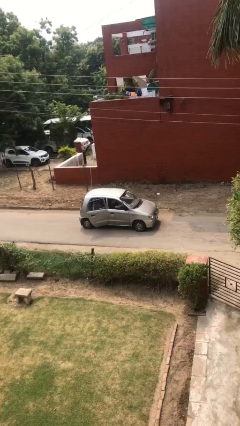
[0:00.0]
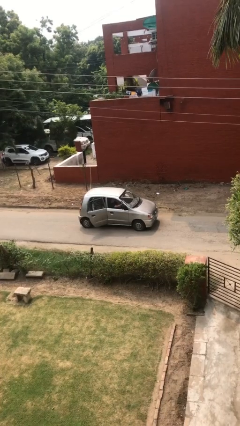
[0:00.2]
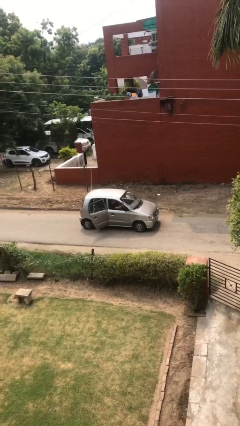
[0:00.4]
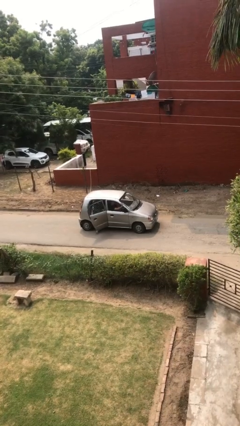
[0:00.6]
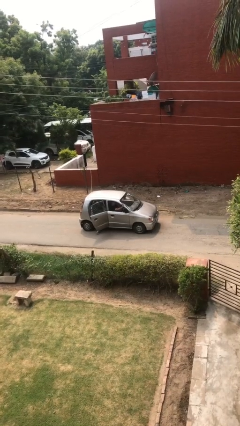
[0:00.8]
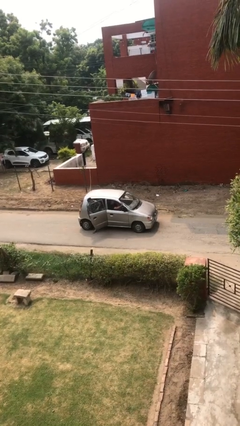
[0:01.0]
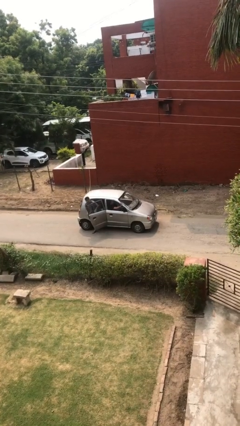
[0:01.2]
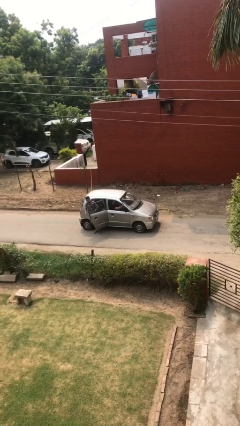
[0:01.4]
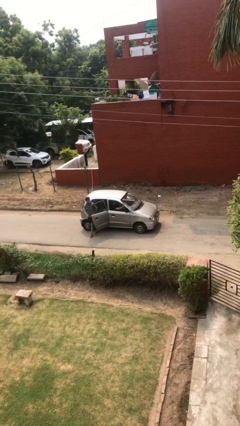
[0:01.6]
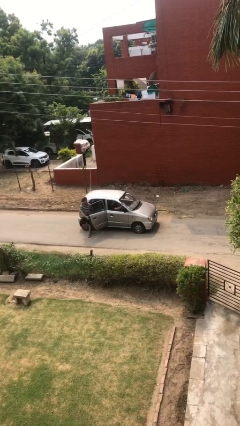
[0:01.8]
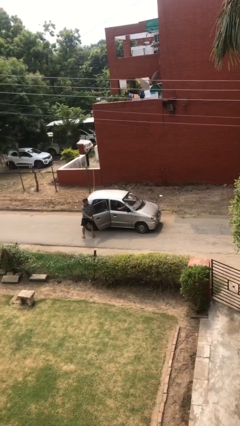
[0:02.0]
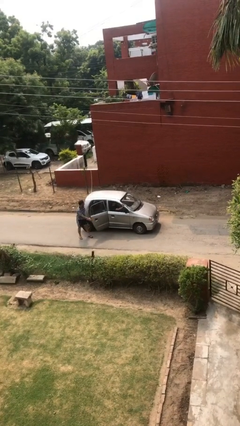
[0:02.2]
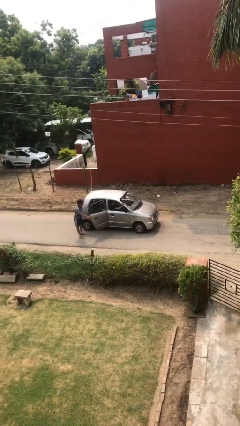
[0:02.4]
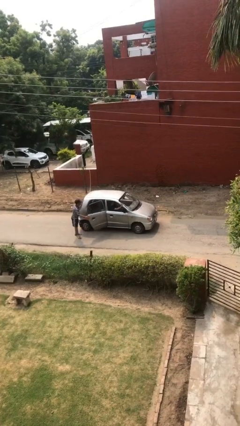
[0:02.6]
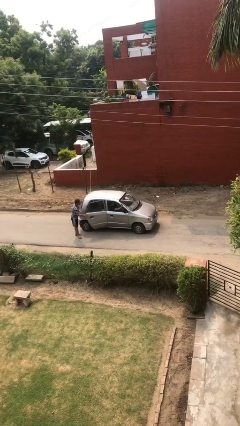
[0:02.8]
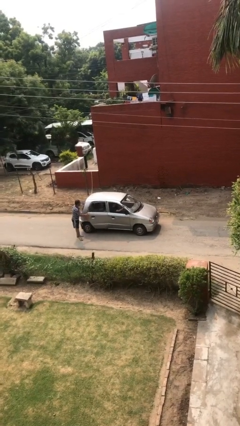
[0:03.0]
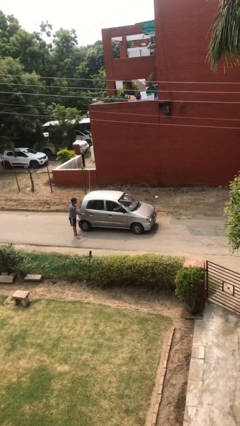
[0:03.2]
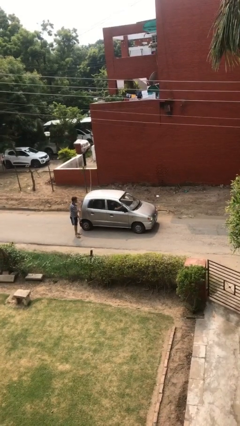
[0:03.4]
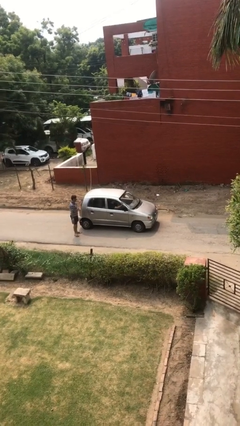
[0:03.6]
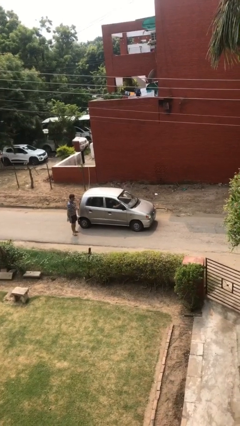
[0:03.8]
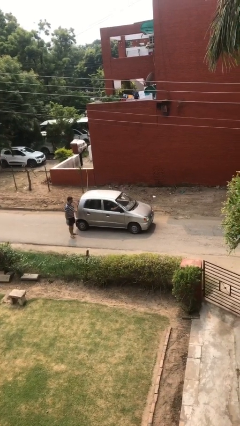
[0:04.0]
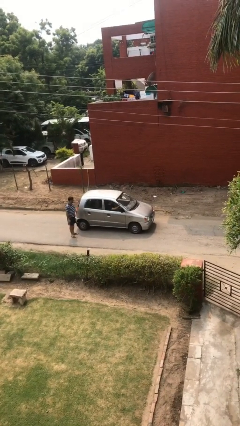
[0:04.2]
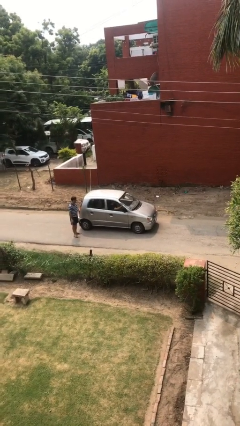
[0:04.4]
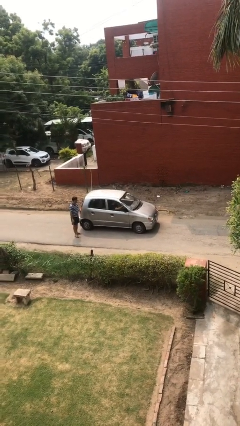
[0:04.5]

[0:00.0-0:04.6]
car drops off person

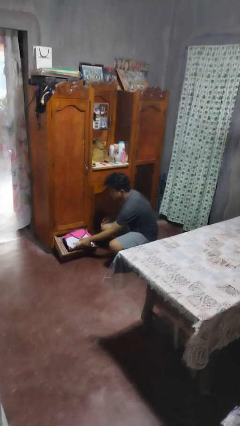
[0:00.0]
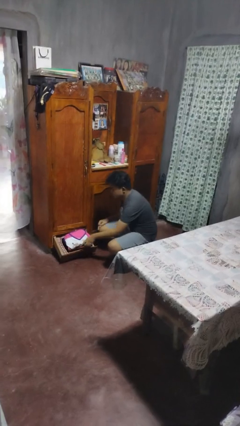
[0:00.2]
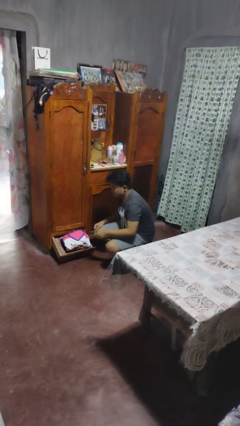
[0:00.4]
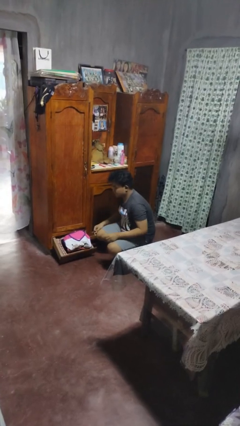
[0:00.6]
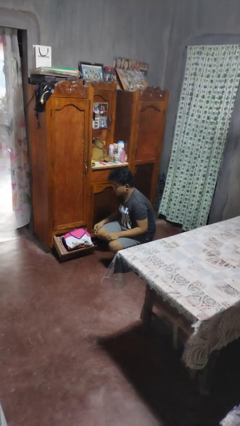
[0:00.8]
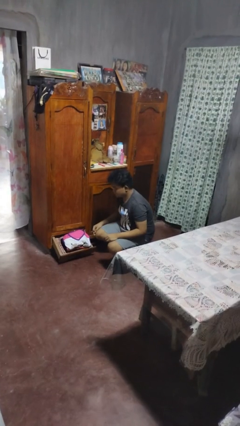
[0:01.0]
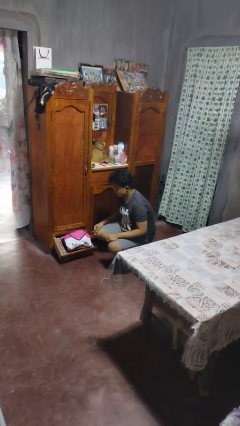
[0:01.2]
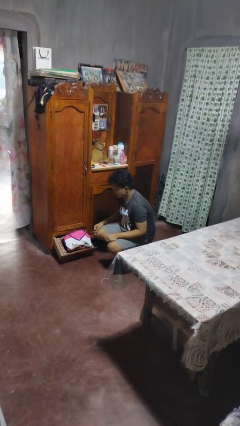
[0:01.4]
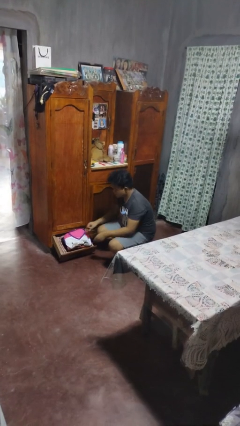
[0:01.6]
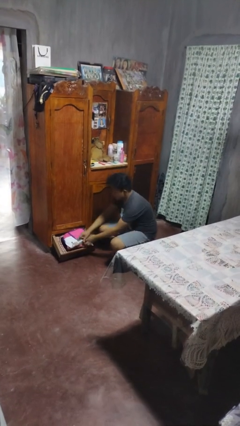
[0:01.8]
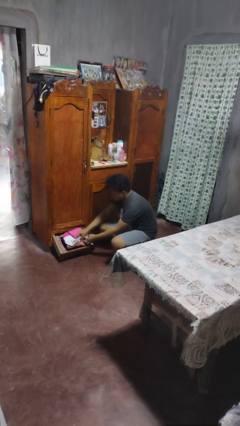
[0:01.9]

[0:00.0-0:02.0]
person puts clothes into dresser

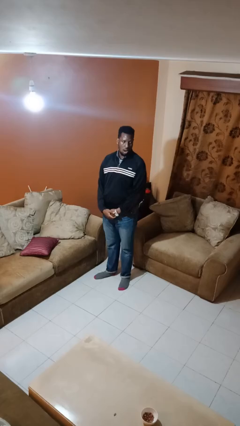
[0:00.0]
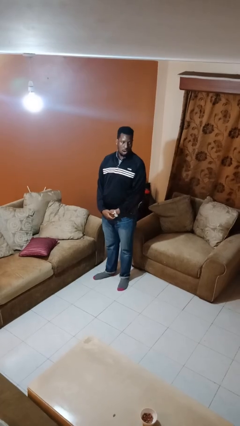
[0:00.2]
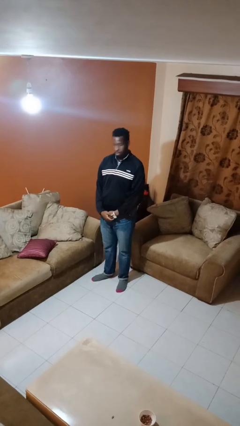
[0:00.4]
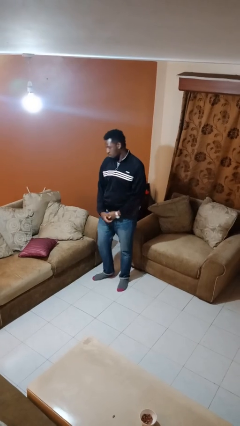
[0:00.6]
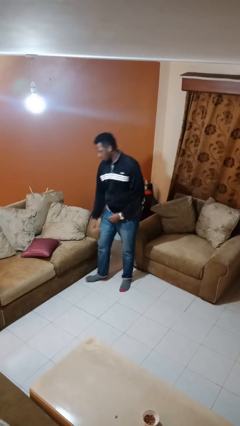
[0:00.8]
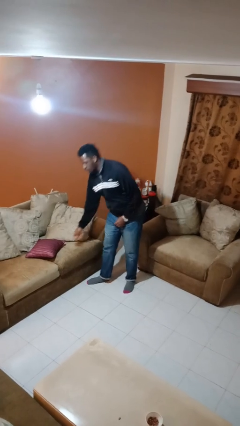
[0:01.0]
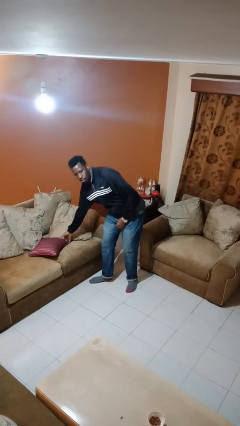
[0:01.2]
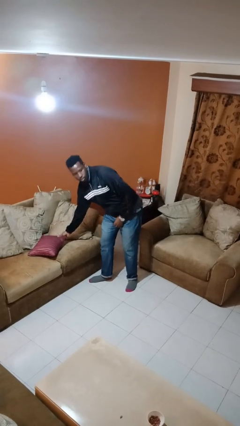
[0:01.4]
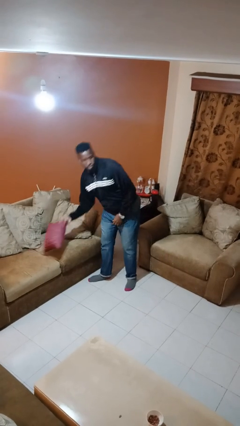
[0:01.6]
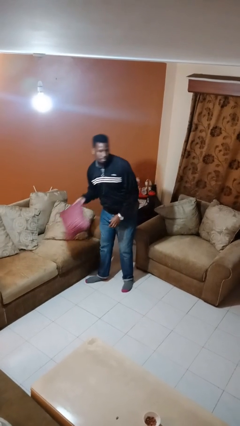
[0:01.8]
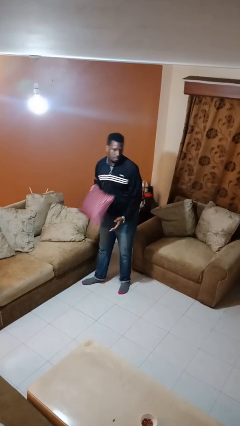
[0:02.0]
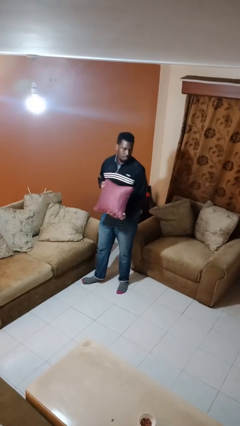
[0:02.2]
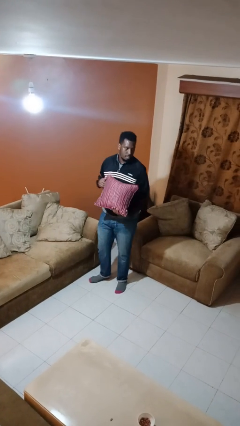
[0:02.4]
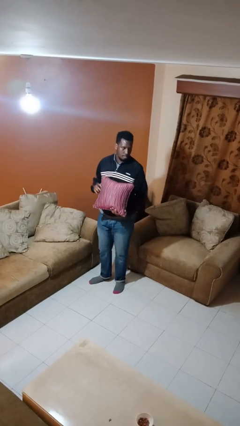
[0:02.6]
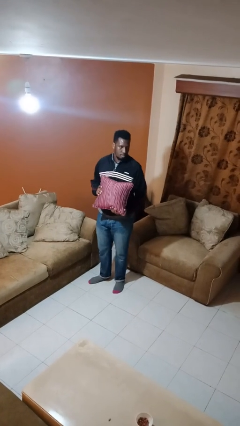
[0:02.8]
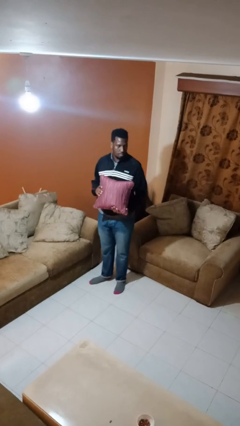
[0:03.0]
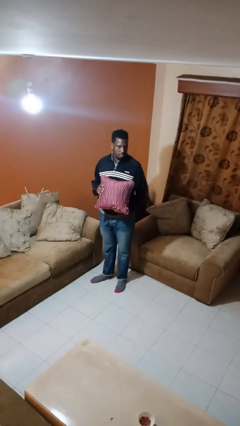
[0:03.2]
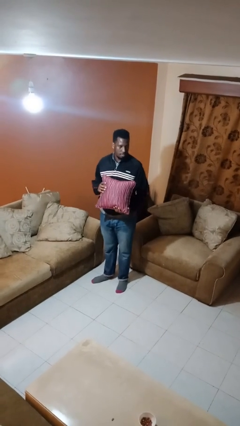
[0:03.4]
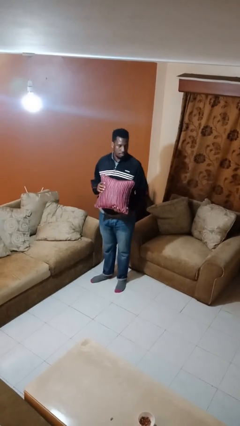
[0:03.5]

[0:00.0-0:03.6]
person picks up object from couch

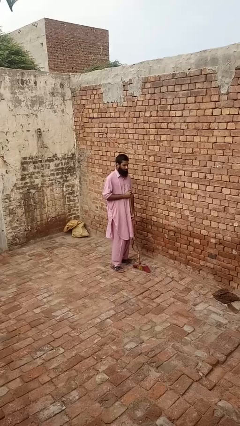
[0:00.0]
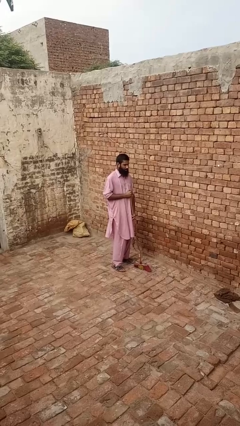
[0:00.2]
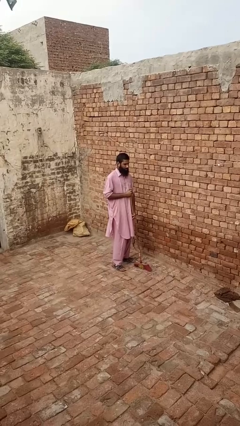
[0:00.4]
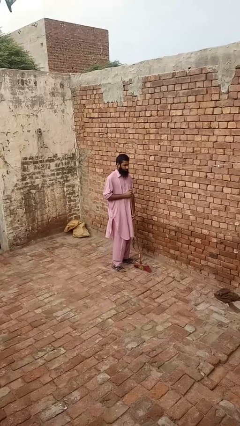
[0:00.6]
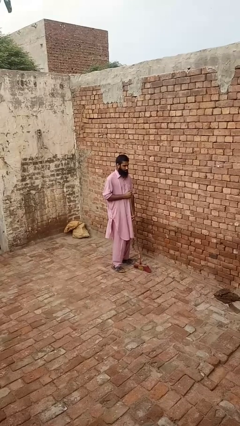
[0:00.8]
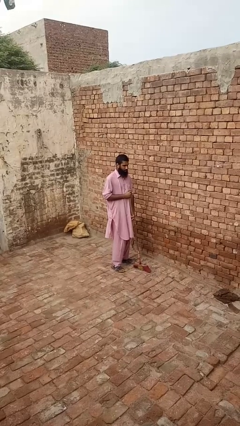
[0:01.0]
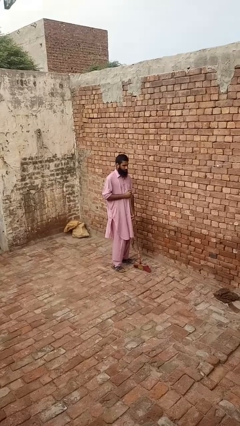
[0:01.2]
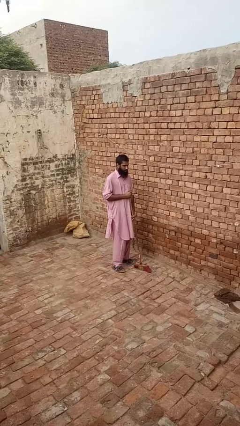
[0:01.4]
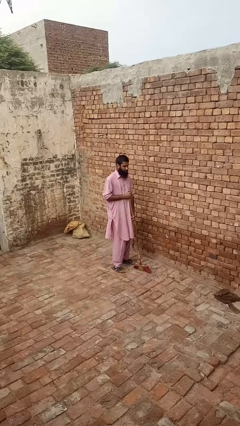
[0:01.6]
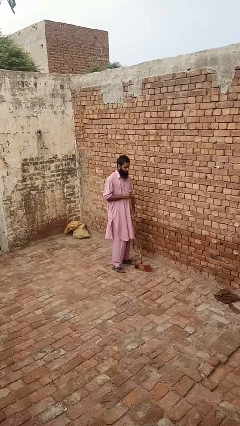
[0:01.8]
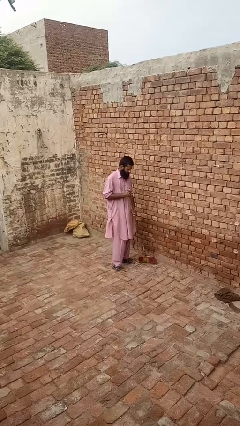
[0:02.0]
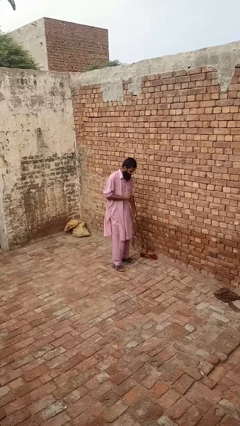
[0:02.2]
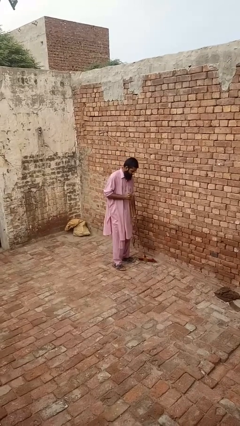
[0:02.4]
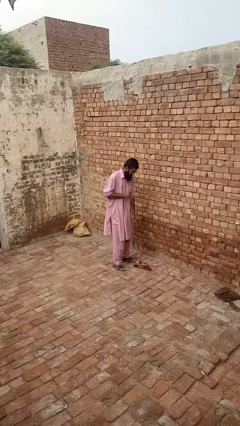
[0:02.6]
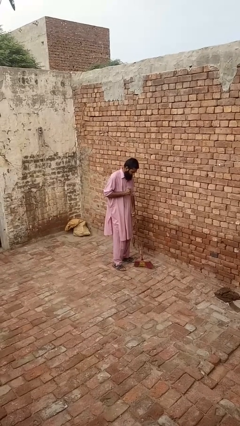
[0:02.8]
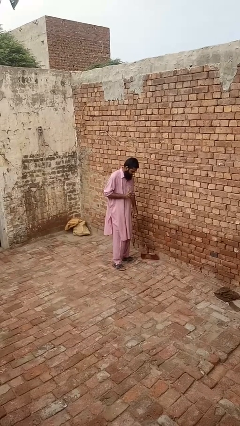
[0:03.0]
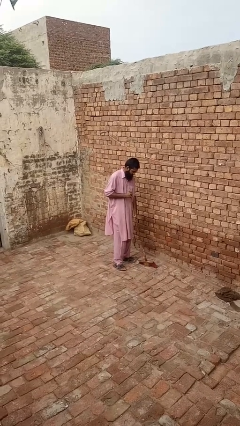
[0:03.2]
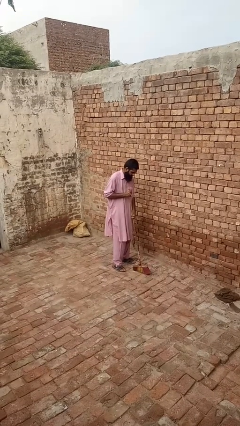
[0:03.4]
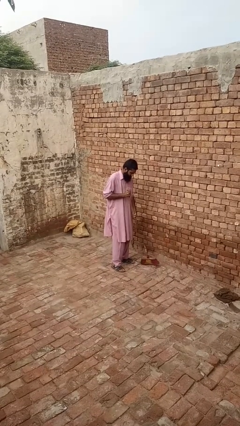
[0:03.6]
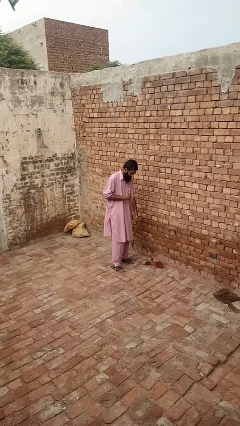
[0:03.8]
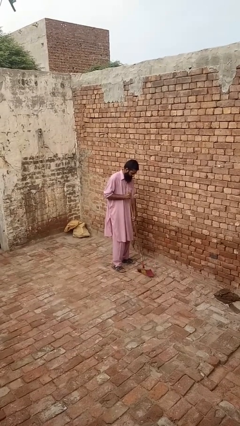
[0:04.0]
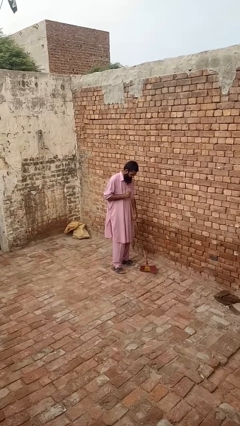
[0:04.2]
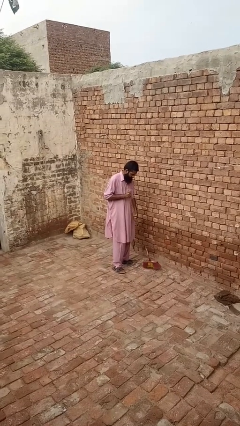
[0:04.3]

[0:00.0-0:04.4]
person sweeps floor

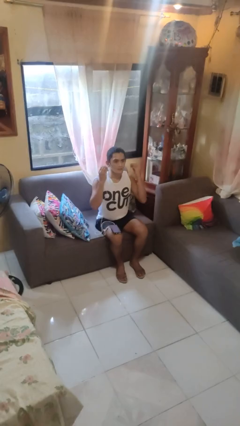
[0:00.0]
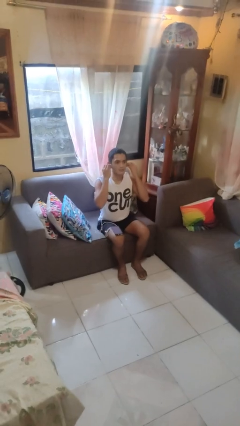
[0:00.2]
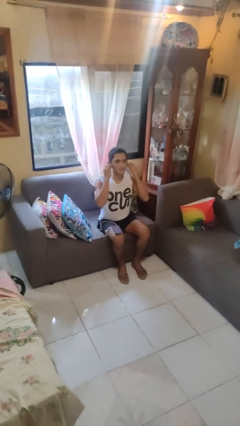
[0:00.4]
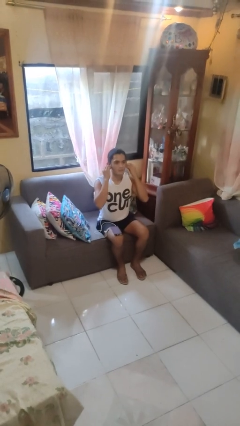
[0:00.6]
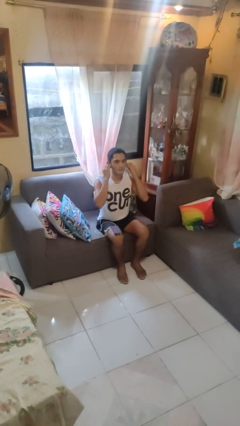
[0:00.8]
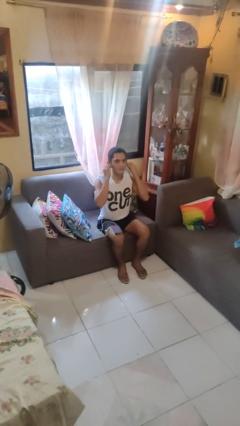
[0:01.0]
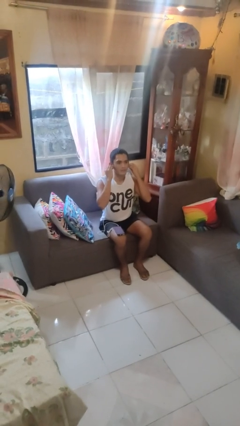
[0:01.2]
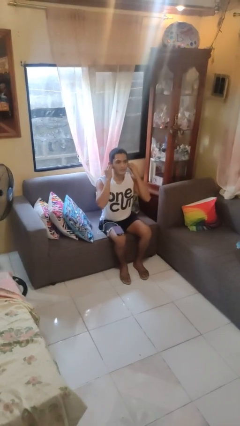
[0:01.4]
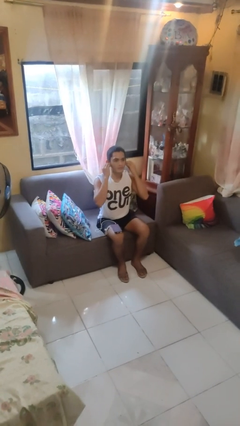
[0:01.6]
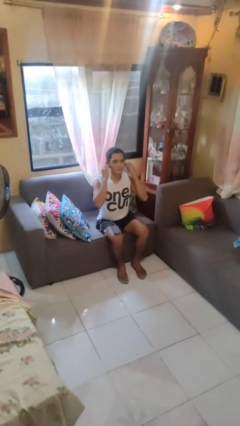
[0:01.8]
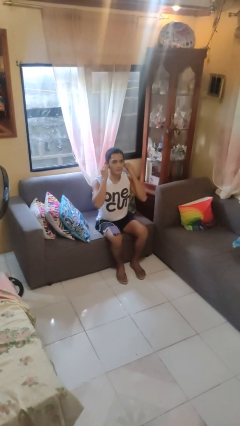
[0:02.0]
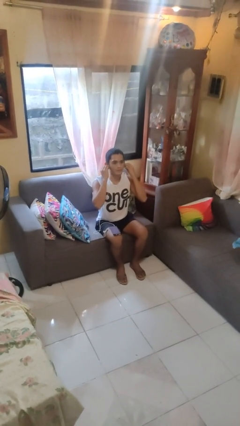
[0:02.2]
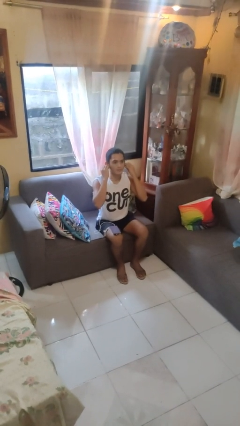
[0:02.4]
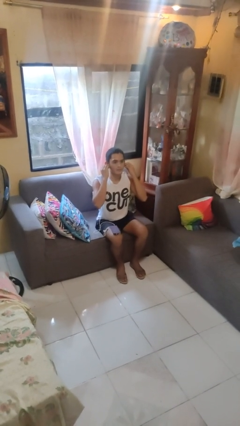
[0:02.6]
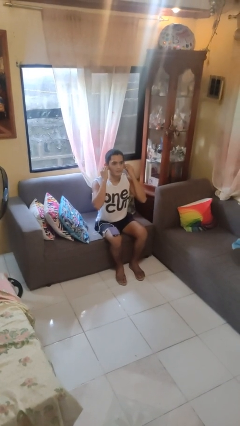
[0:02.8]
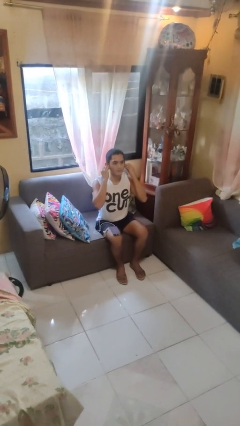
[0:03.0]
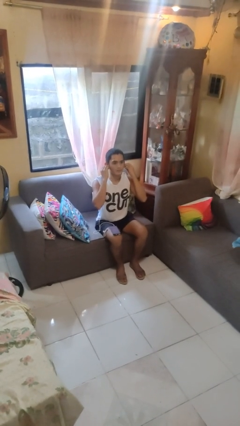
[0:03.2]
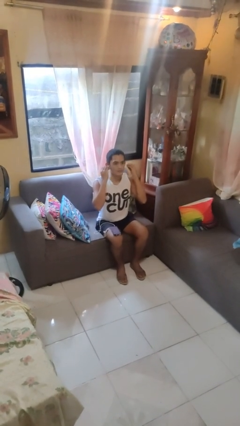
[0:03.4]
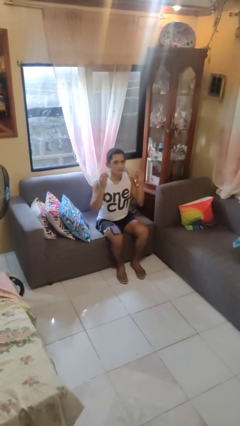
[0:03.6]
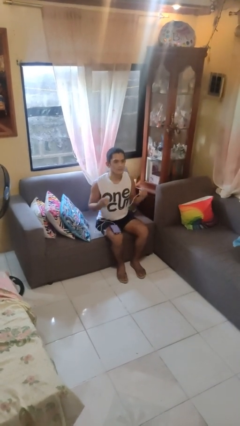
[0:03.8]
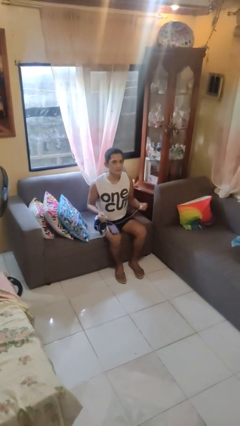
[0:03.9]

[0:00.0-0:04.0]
person puts on headphones
